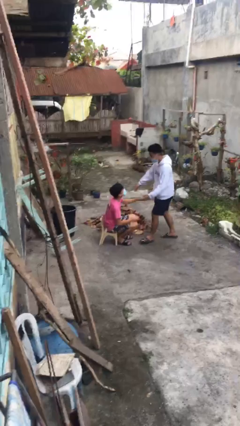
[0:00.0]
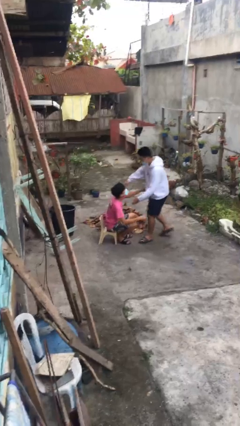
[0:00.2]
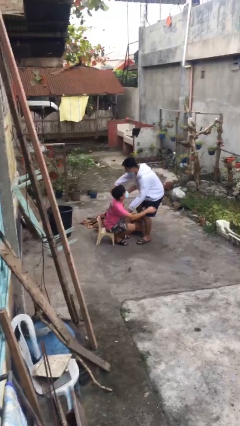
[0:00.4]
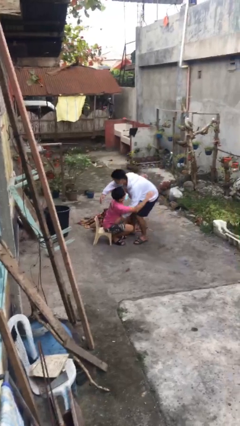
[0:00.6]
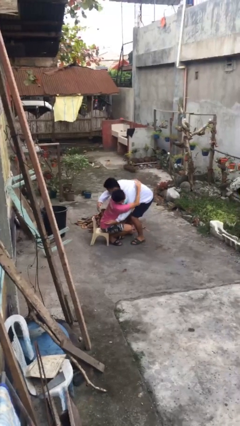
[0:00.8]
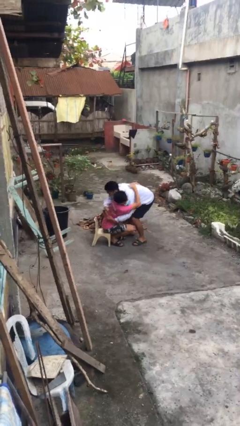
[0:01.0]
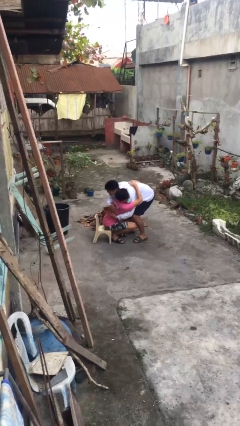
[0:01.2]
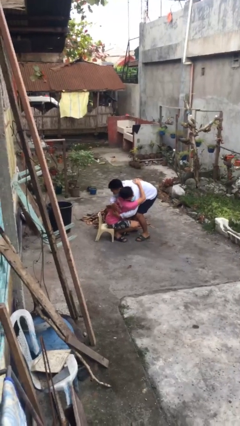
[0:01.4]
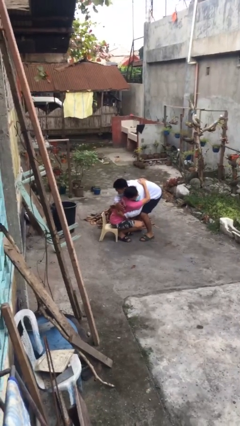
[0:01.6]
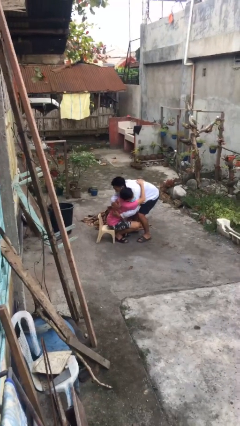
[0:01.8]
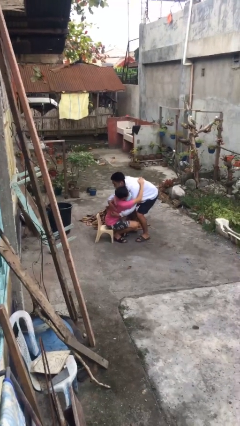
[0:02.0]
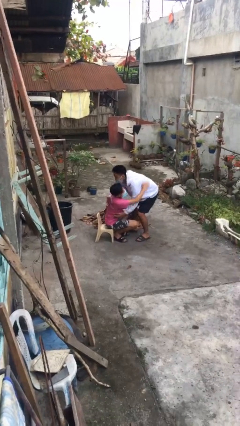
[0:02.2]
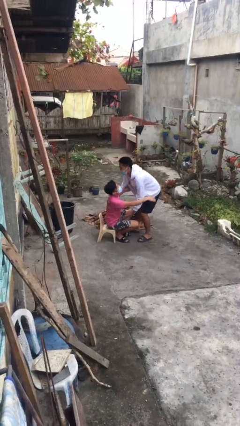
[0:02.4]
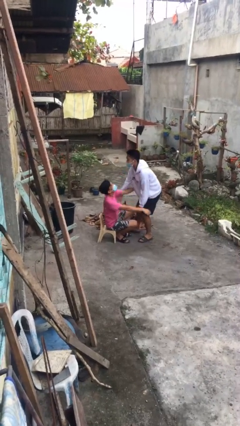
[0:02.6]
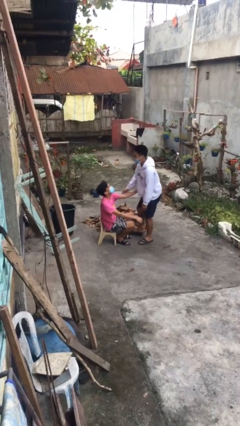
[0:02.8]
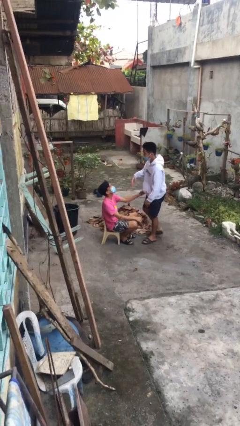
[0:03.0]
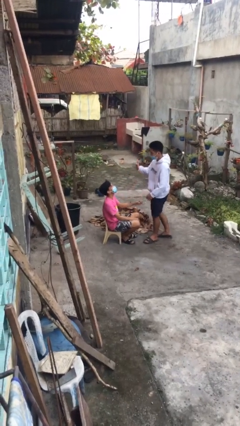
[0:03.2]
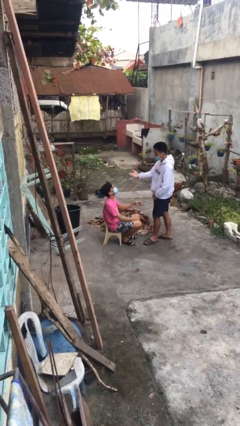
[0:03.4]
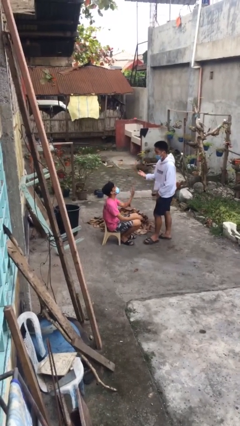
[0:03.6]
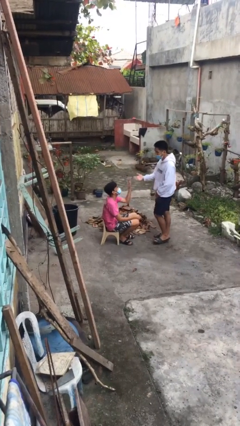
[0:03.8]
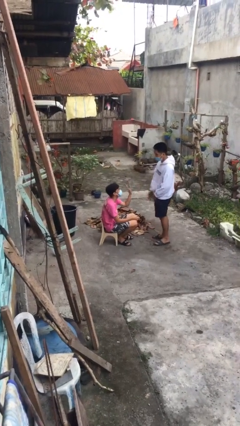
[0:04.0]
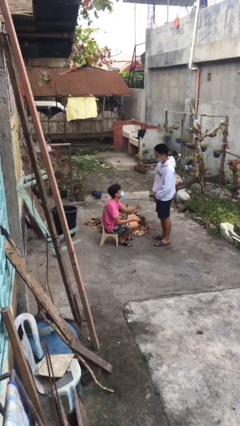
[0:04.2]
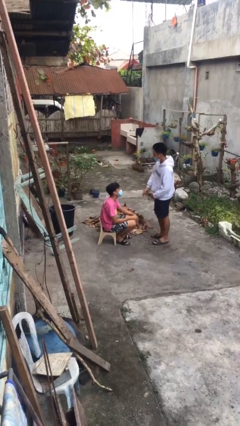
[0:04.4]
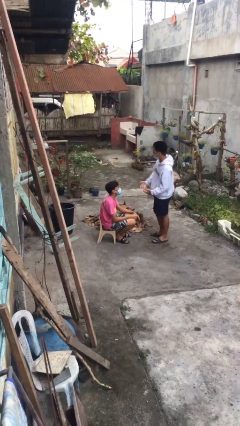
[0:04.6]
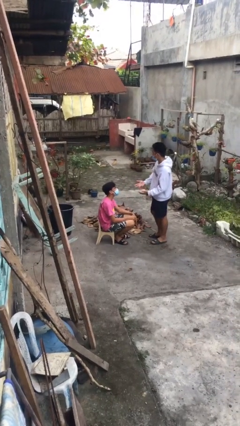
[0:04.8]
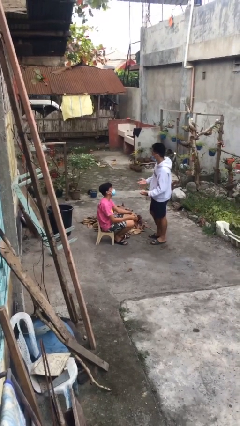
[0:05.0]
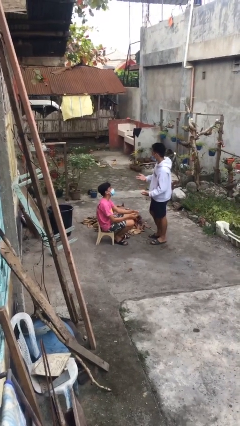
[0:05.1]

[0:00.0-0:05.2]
person embraces person

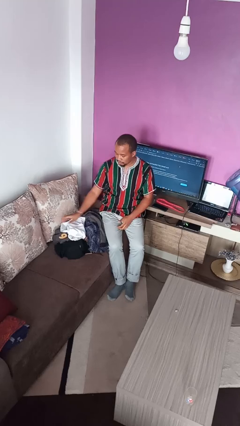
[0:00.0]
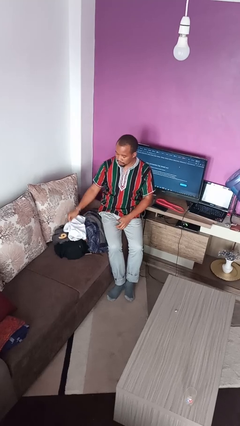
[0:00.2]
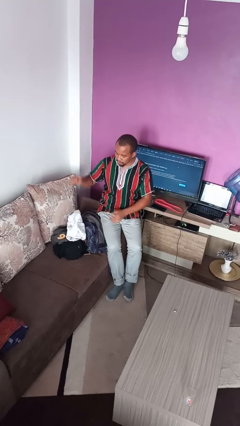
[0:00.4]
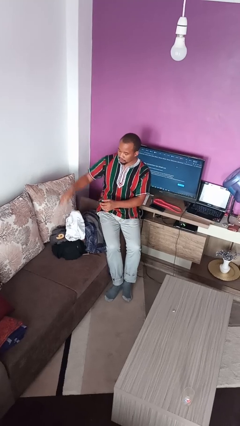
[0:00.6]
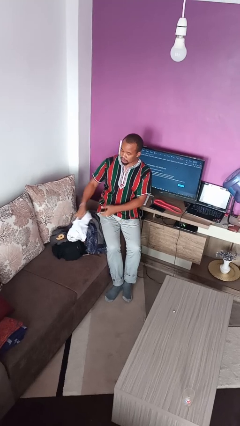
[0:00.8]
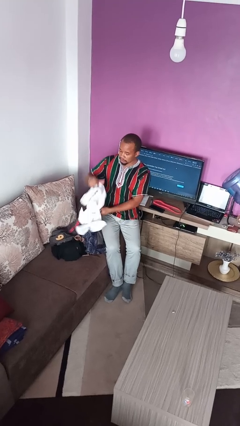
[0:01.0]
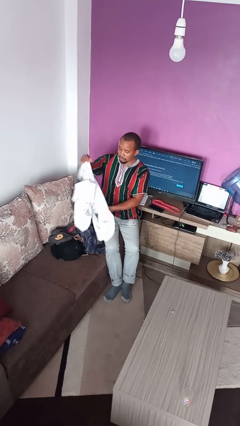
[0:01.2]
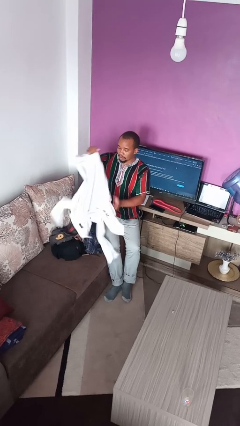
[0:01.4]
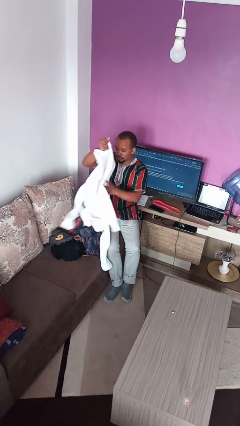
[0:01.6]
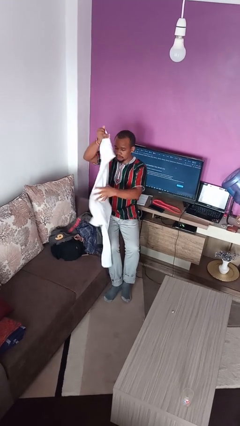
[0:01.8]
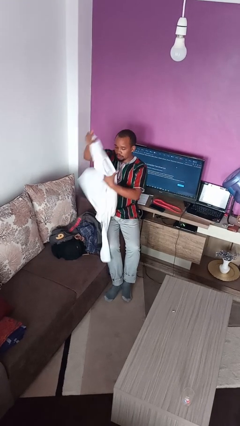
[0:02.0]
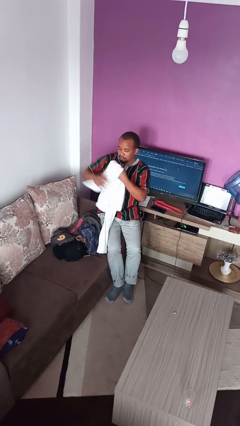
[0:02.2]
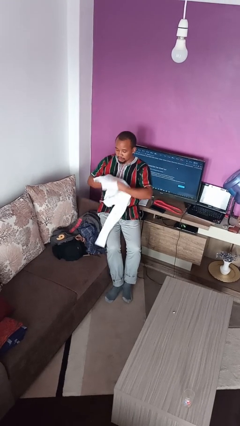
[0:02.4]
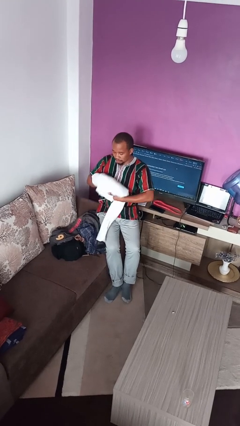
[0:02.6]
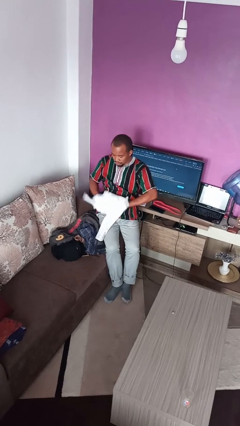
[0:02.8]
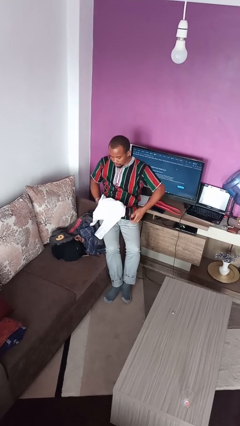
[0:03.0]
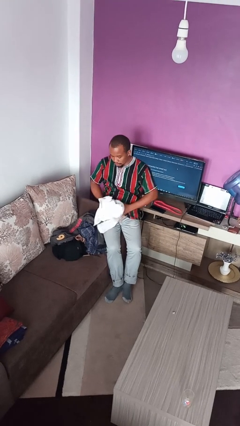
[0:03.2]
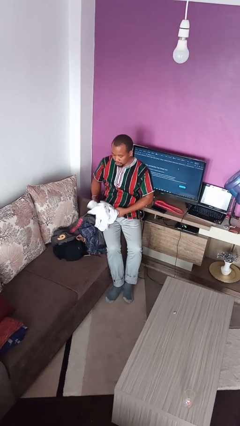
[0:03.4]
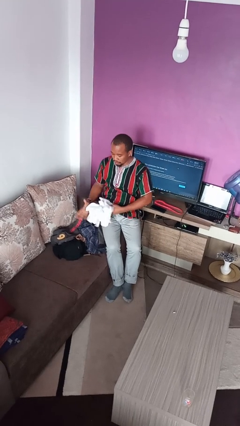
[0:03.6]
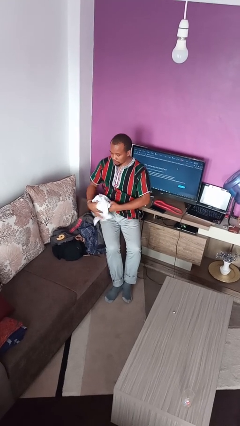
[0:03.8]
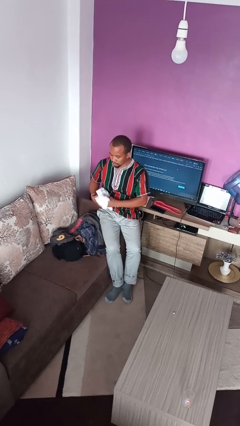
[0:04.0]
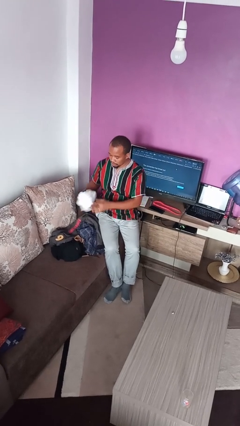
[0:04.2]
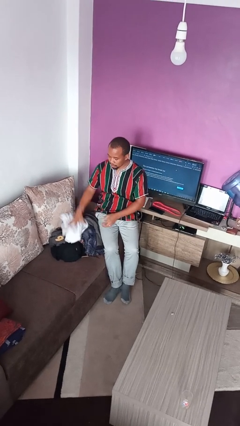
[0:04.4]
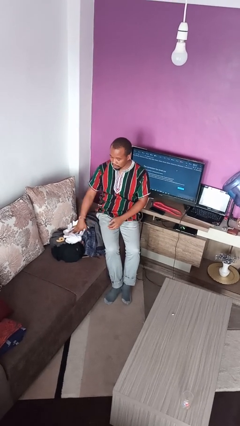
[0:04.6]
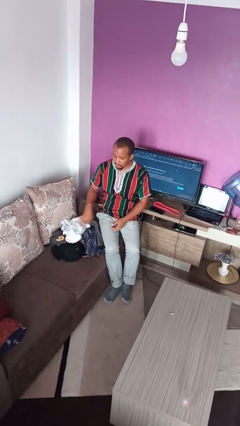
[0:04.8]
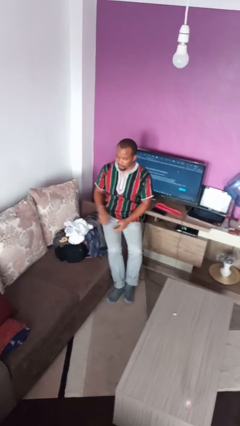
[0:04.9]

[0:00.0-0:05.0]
person folds shirt

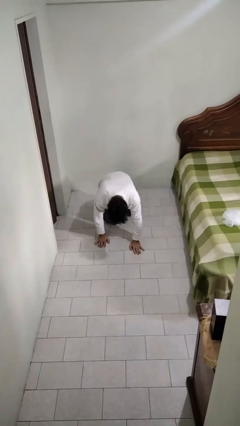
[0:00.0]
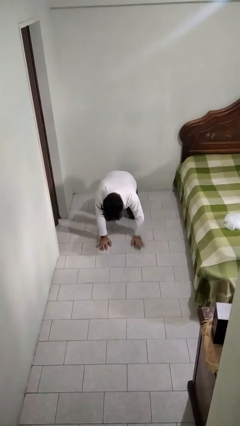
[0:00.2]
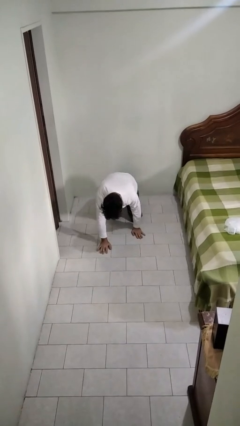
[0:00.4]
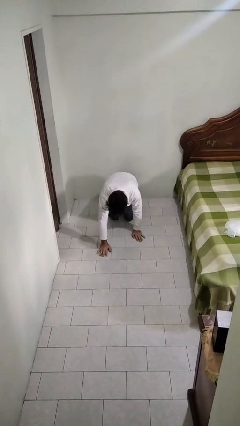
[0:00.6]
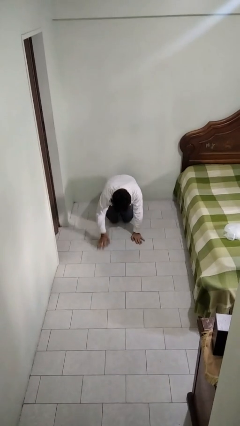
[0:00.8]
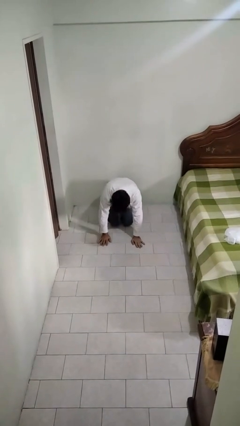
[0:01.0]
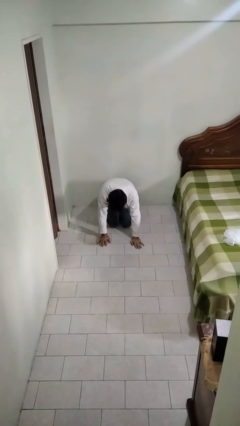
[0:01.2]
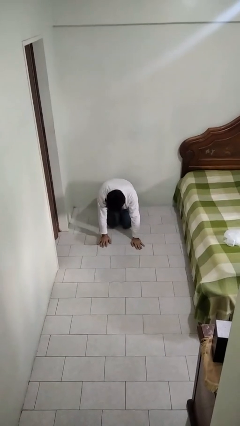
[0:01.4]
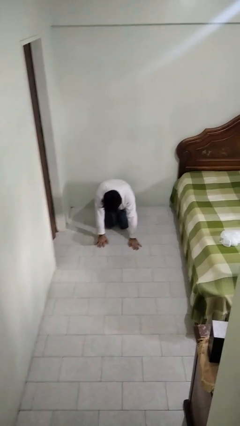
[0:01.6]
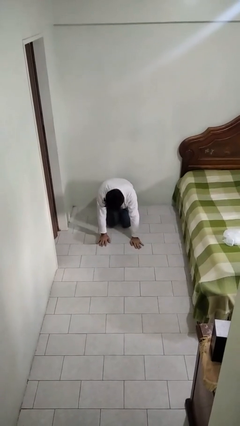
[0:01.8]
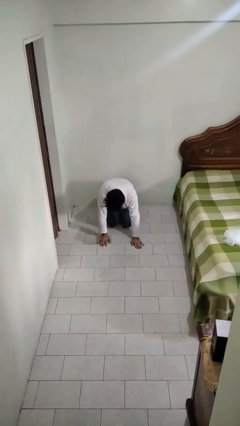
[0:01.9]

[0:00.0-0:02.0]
person crawls

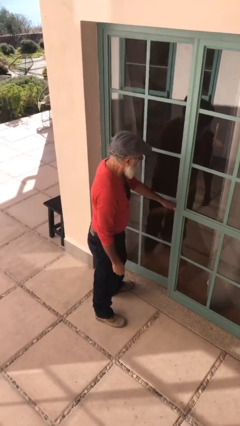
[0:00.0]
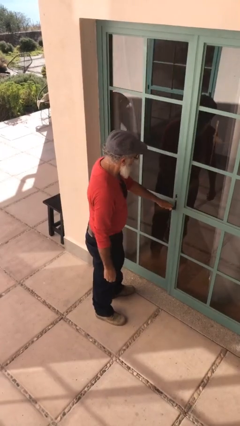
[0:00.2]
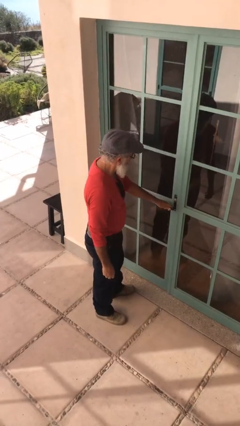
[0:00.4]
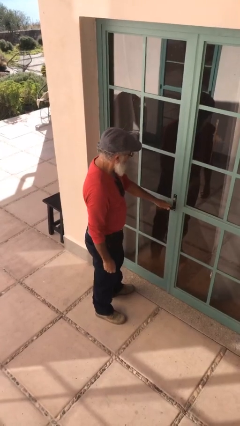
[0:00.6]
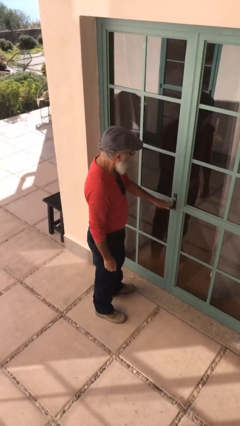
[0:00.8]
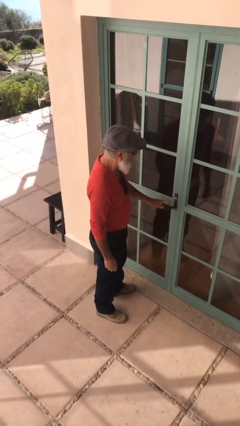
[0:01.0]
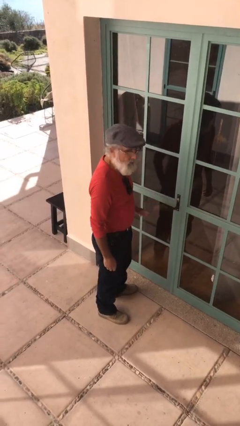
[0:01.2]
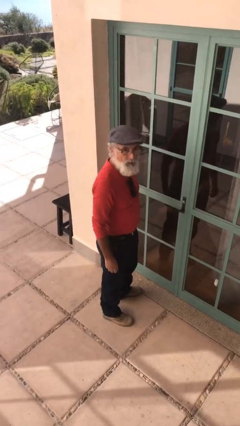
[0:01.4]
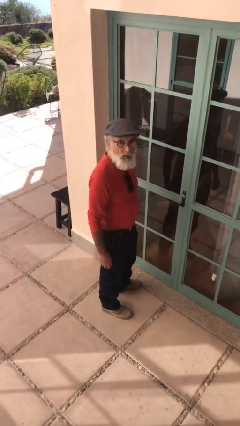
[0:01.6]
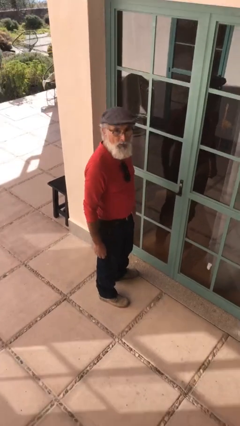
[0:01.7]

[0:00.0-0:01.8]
person closes facility door

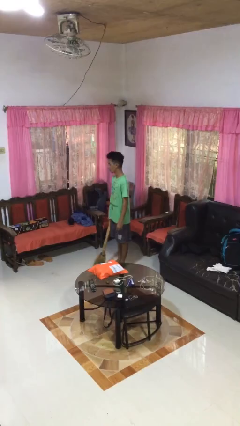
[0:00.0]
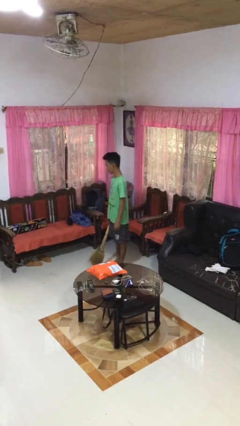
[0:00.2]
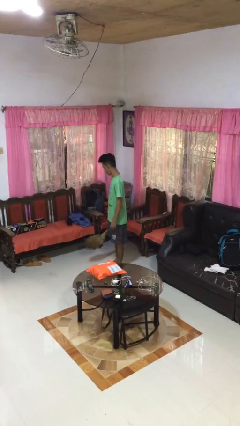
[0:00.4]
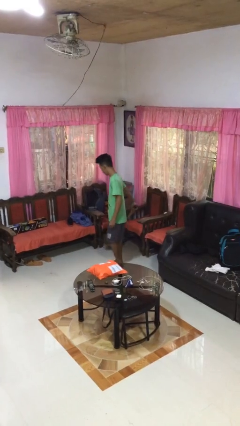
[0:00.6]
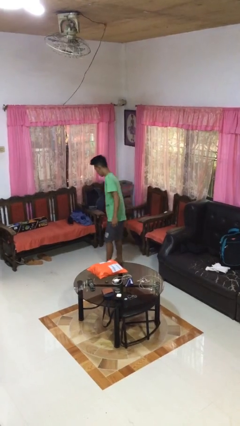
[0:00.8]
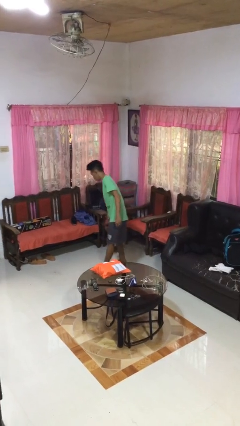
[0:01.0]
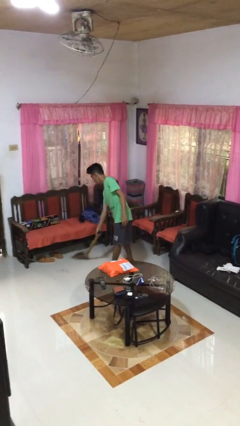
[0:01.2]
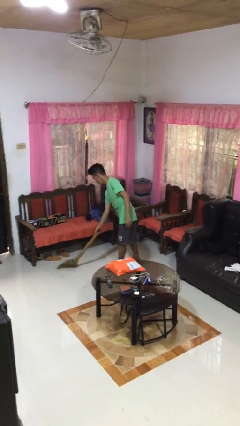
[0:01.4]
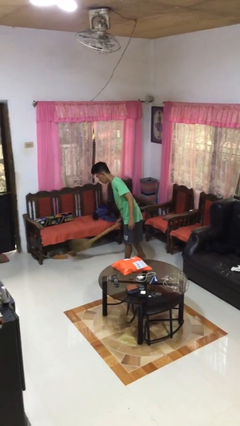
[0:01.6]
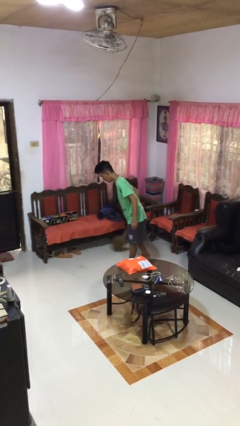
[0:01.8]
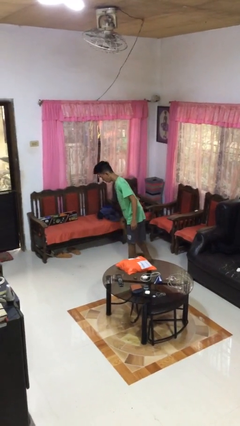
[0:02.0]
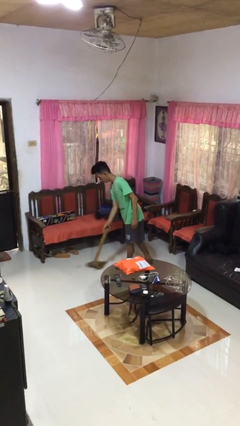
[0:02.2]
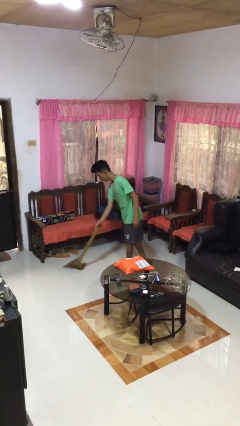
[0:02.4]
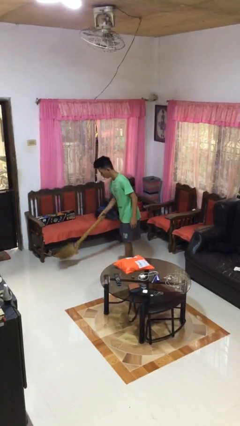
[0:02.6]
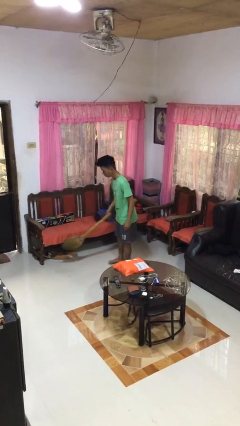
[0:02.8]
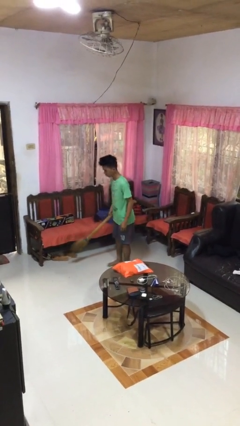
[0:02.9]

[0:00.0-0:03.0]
person sweeps floor

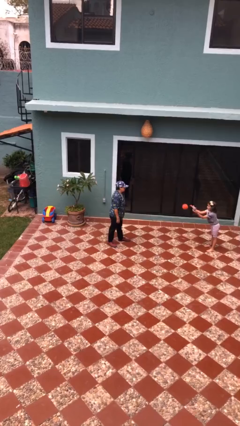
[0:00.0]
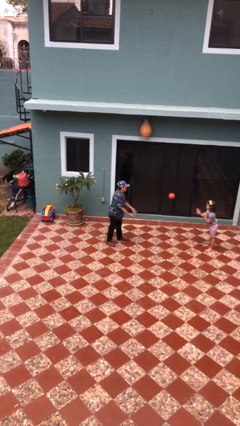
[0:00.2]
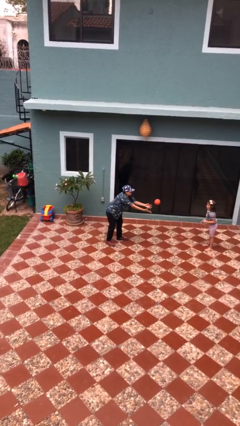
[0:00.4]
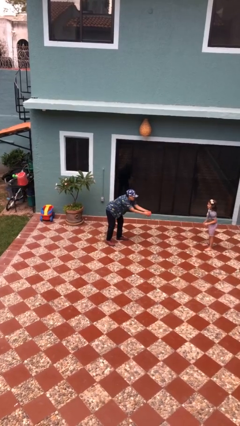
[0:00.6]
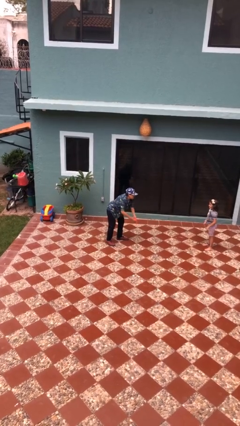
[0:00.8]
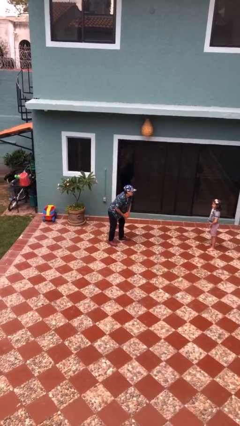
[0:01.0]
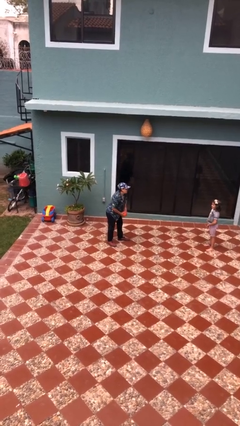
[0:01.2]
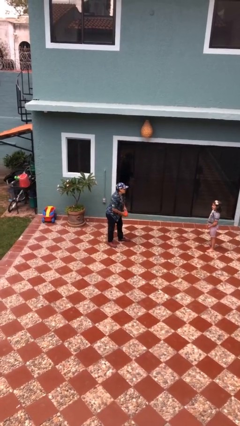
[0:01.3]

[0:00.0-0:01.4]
person catches object from person
